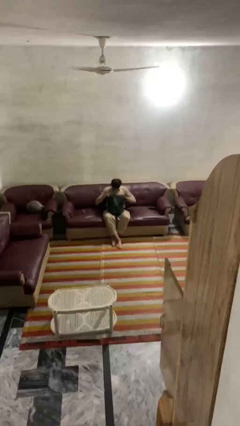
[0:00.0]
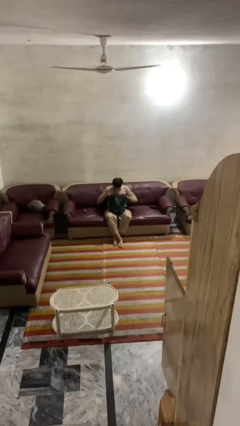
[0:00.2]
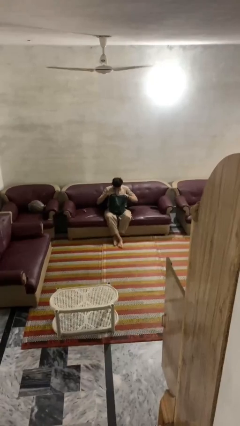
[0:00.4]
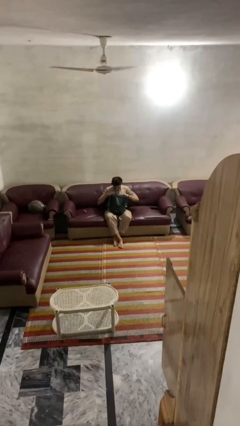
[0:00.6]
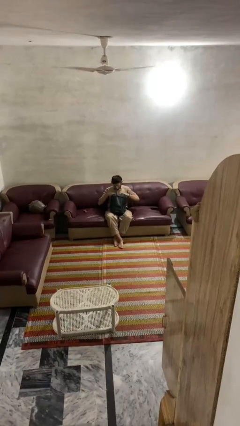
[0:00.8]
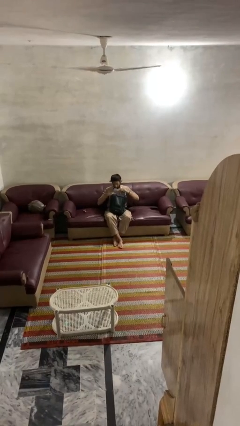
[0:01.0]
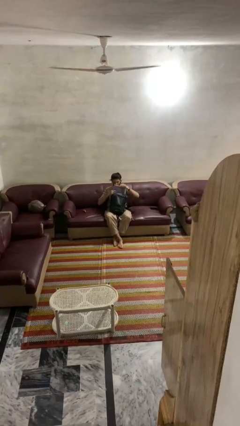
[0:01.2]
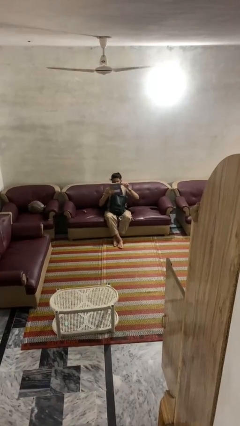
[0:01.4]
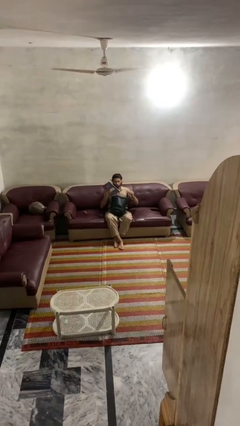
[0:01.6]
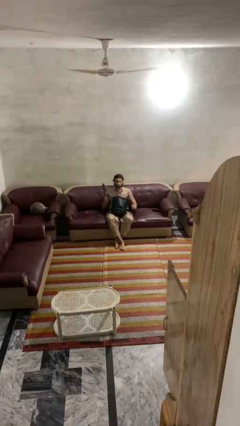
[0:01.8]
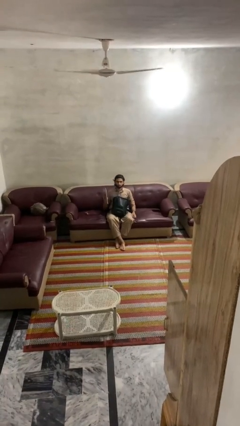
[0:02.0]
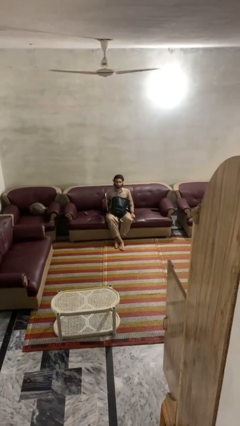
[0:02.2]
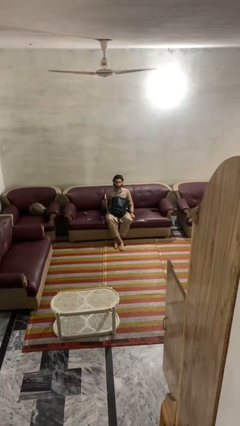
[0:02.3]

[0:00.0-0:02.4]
person takes object from backpack

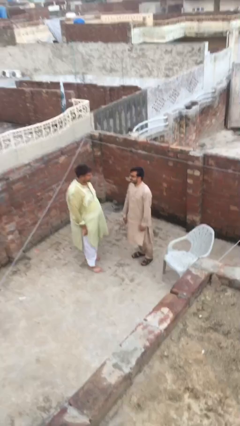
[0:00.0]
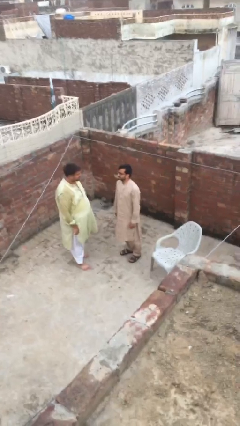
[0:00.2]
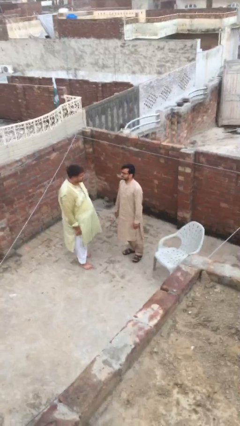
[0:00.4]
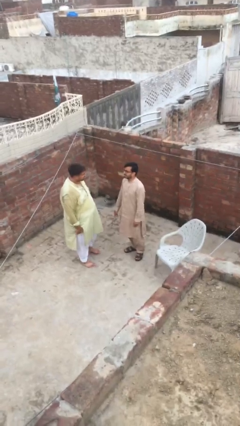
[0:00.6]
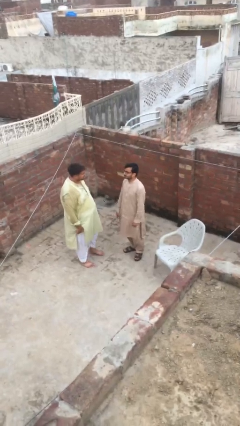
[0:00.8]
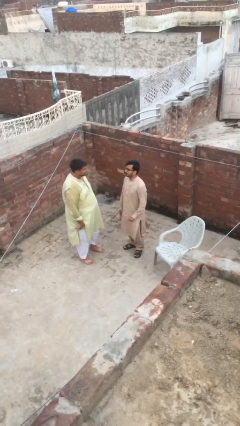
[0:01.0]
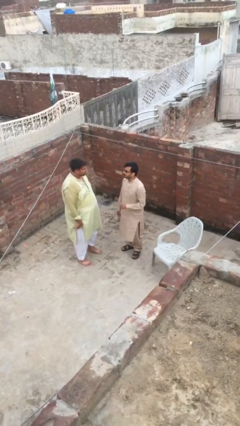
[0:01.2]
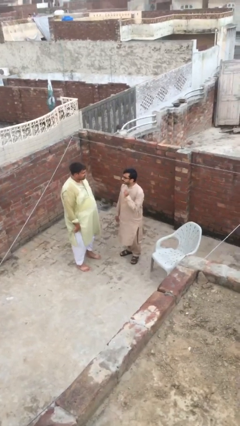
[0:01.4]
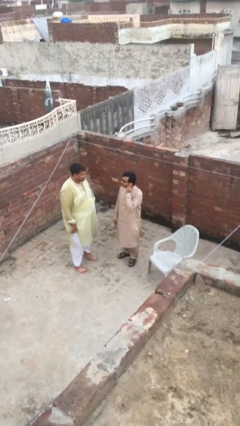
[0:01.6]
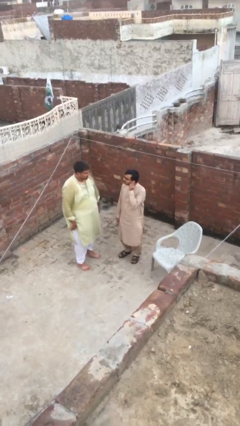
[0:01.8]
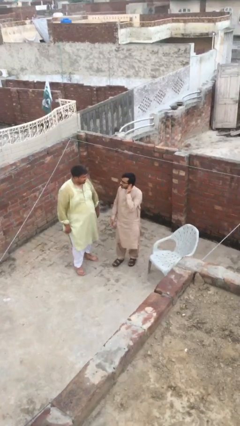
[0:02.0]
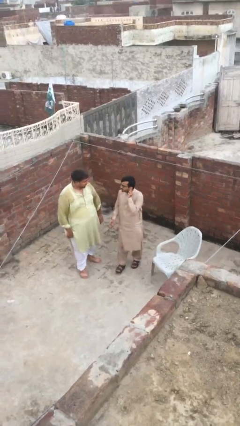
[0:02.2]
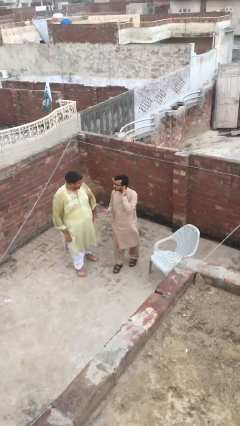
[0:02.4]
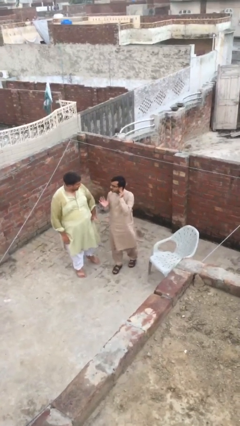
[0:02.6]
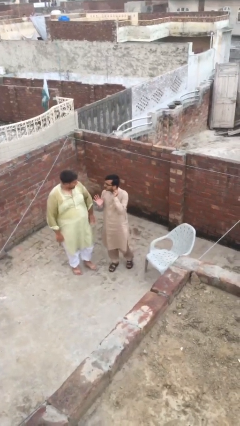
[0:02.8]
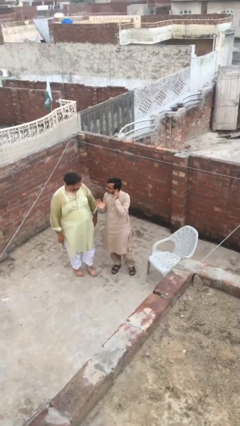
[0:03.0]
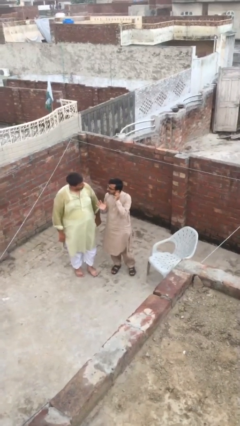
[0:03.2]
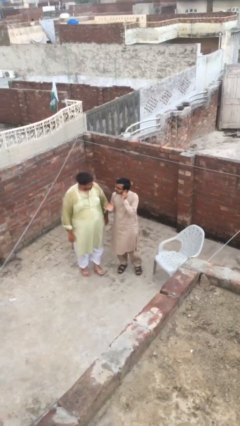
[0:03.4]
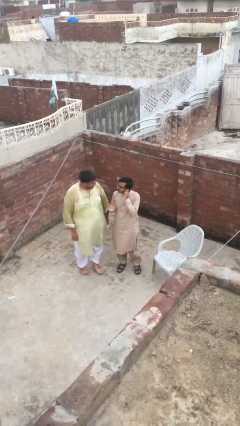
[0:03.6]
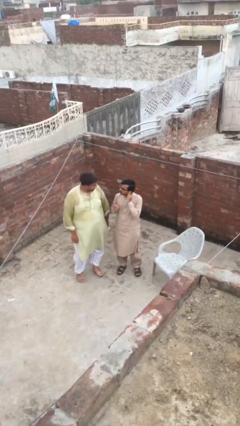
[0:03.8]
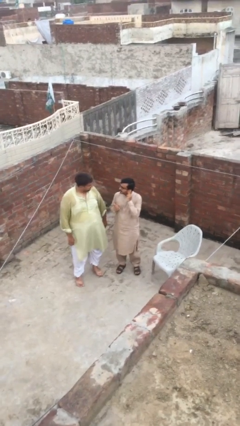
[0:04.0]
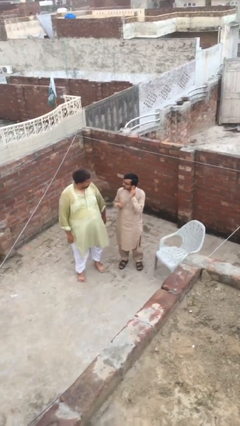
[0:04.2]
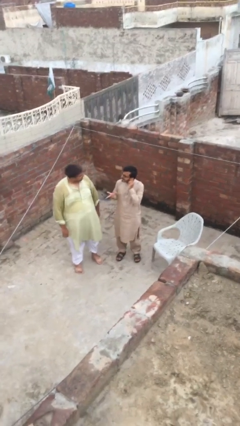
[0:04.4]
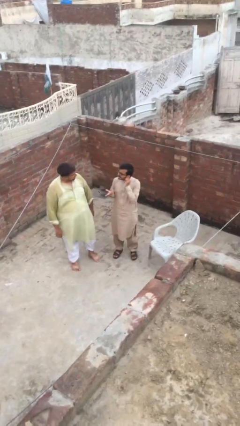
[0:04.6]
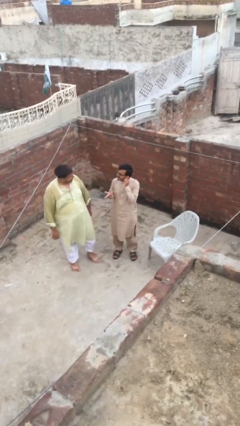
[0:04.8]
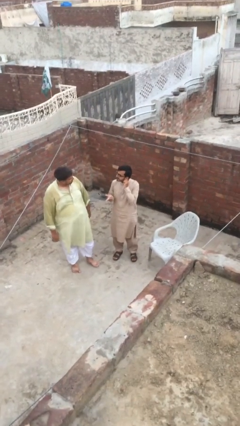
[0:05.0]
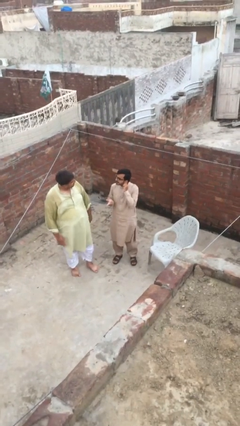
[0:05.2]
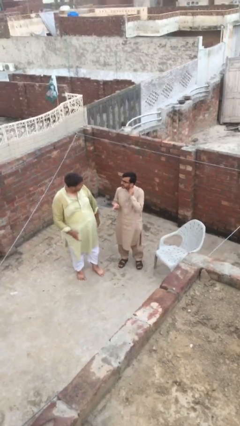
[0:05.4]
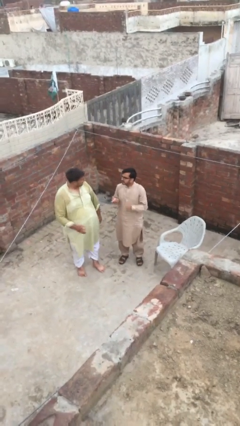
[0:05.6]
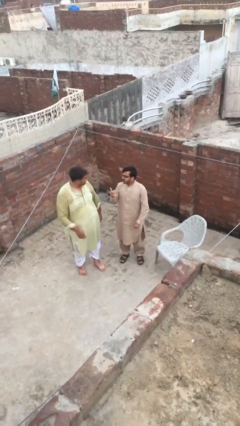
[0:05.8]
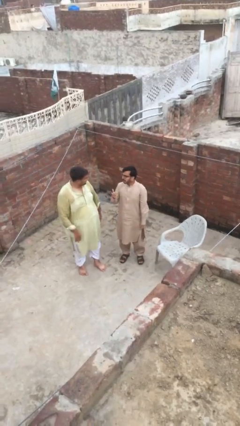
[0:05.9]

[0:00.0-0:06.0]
person talks to person

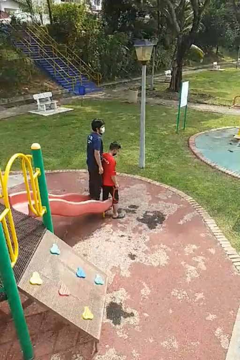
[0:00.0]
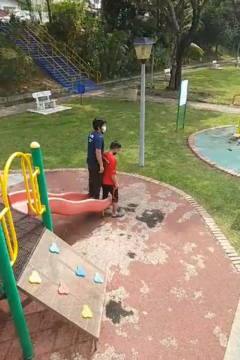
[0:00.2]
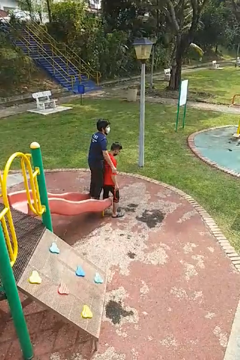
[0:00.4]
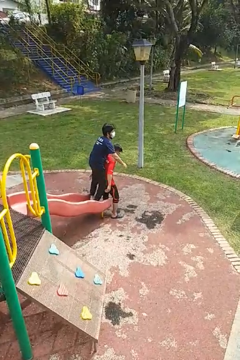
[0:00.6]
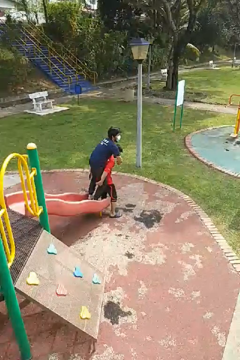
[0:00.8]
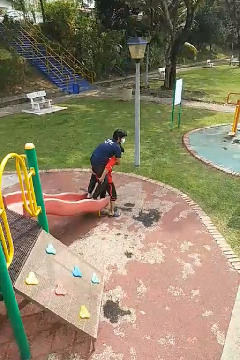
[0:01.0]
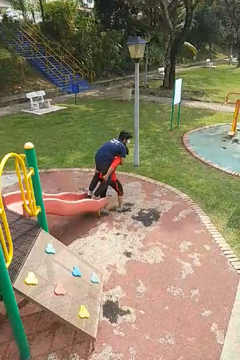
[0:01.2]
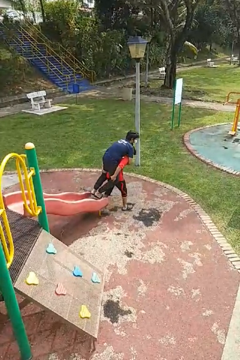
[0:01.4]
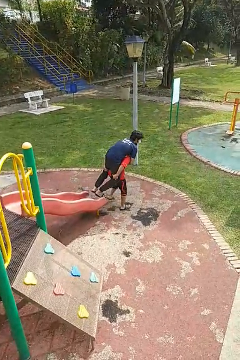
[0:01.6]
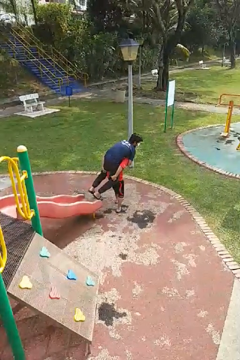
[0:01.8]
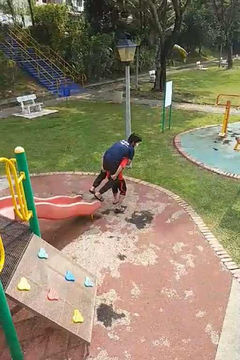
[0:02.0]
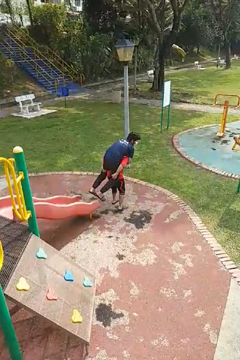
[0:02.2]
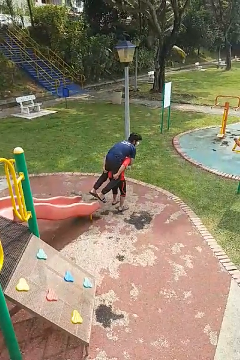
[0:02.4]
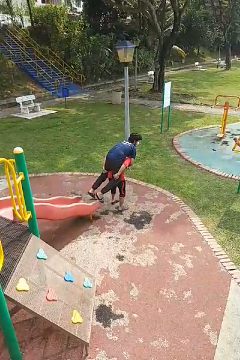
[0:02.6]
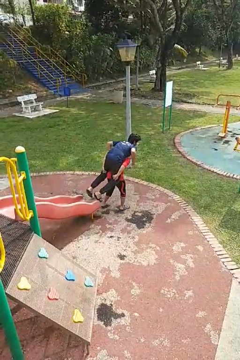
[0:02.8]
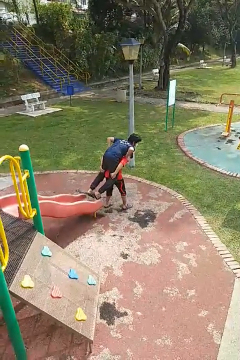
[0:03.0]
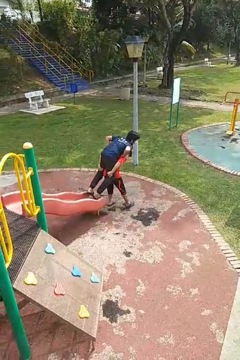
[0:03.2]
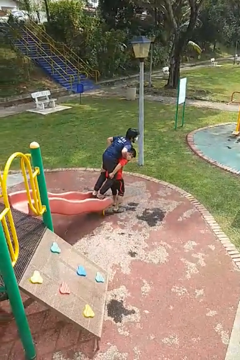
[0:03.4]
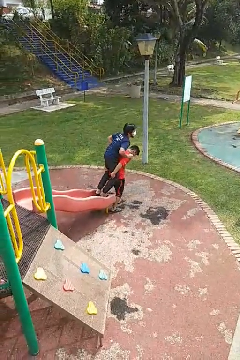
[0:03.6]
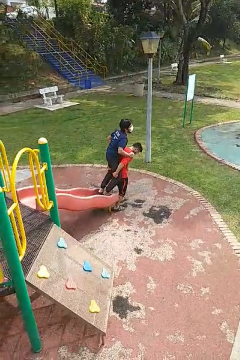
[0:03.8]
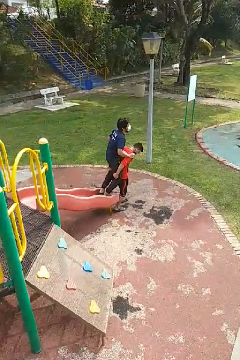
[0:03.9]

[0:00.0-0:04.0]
person carries person on back

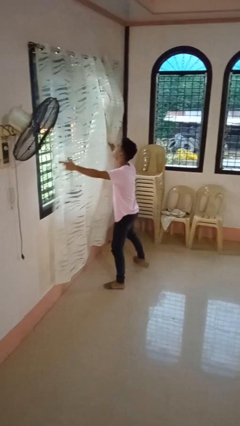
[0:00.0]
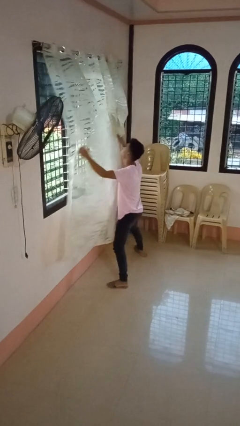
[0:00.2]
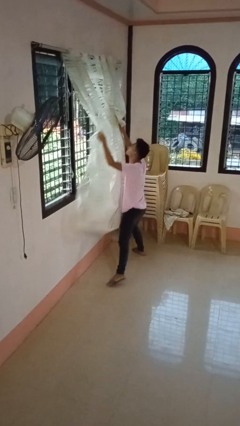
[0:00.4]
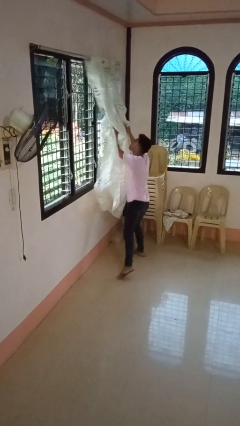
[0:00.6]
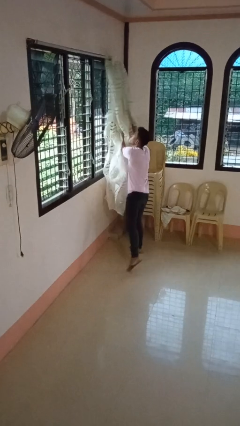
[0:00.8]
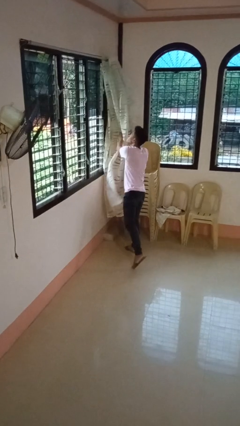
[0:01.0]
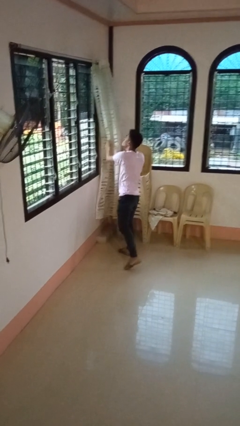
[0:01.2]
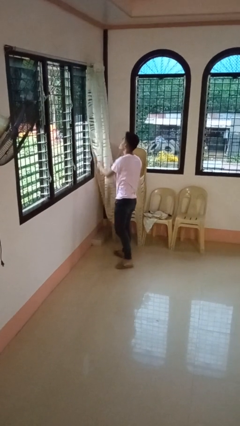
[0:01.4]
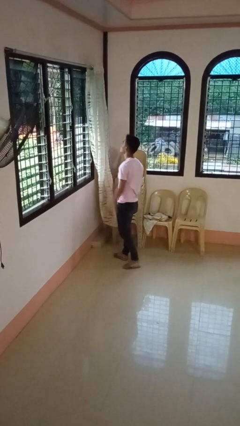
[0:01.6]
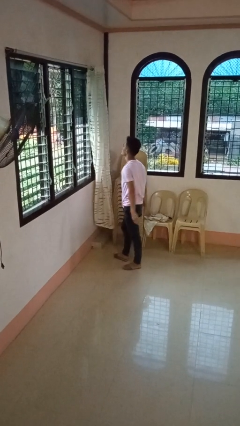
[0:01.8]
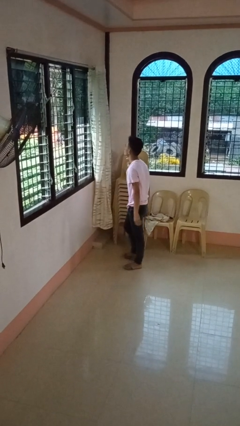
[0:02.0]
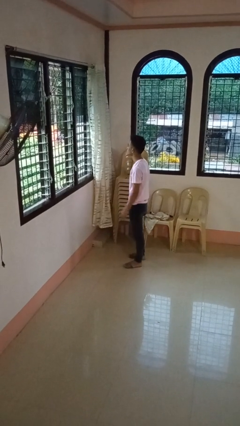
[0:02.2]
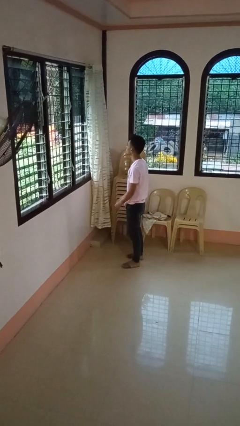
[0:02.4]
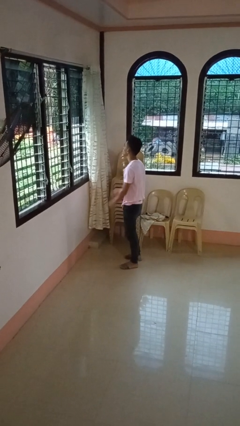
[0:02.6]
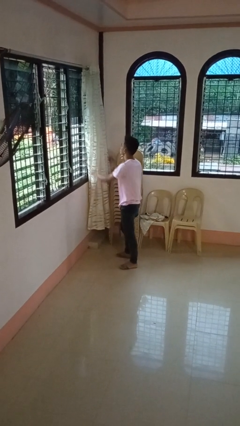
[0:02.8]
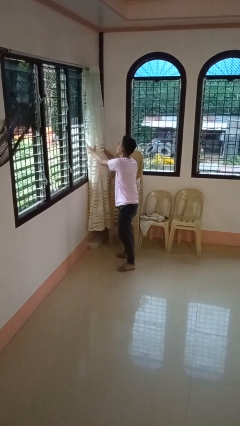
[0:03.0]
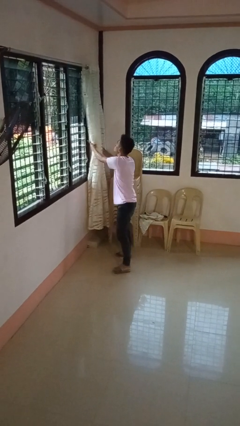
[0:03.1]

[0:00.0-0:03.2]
person opens curtains

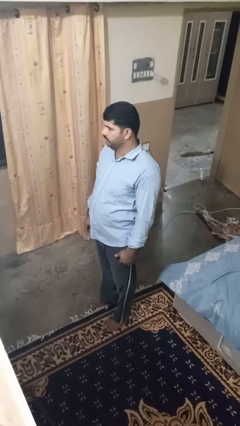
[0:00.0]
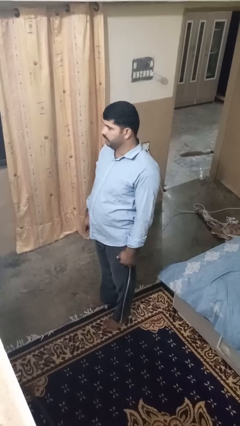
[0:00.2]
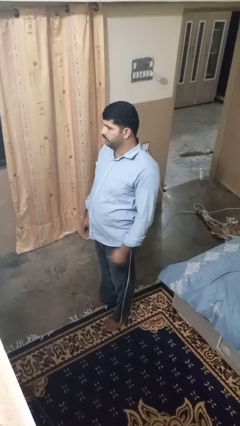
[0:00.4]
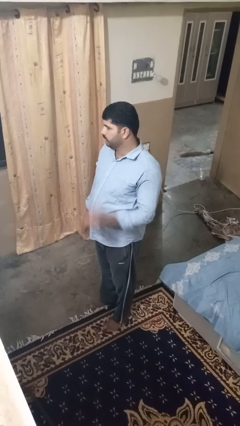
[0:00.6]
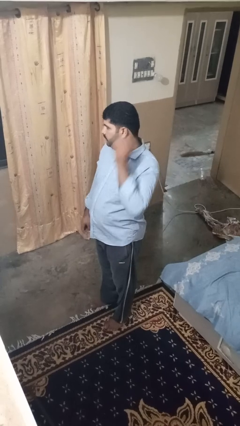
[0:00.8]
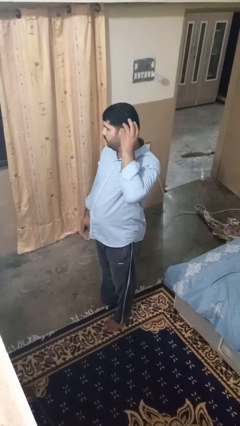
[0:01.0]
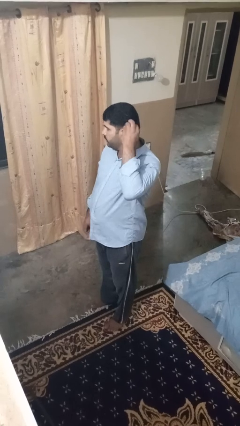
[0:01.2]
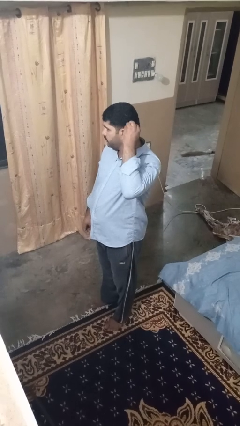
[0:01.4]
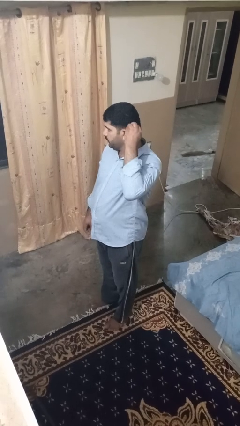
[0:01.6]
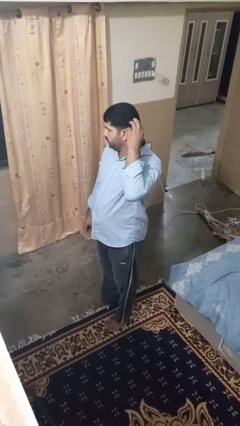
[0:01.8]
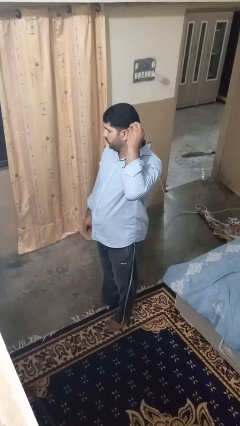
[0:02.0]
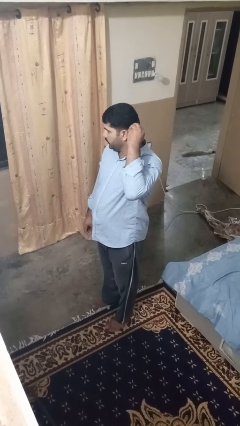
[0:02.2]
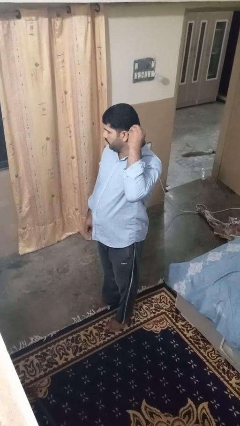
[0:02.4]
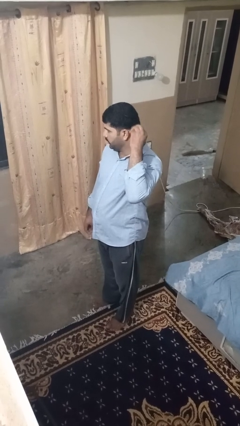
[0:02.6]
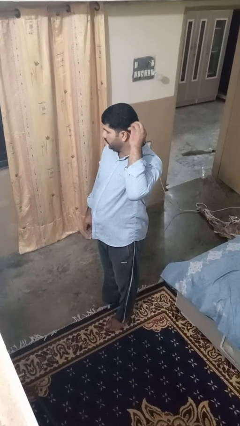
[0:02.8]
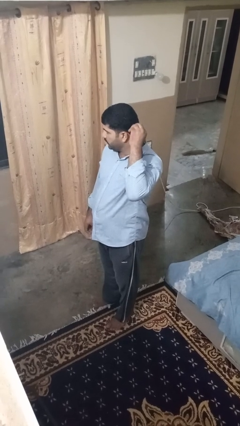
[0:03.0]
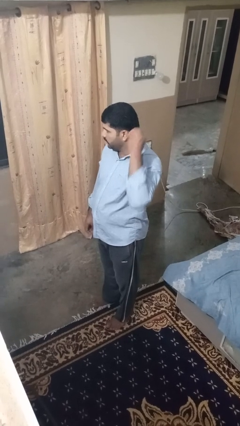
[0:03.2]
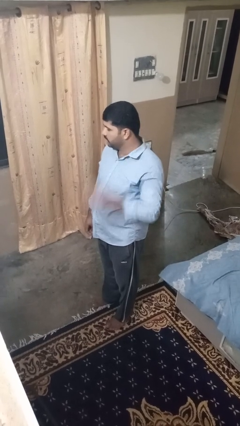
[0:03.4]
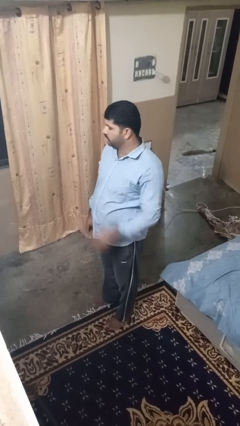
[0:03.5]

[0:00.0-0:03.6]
person strokes hair
